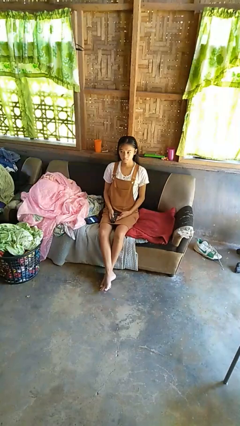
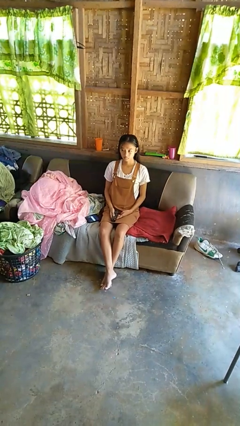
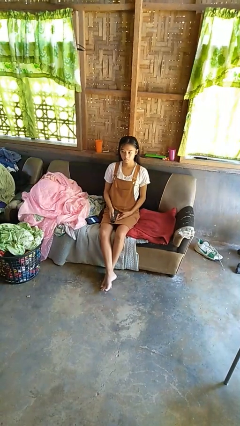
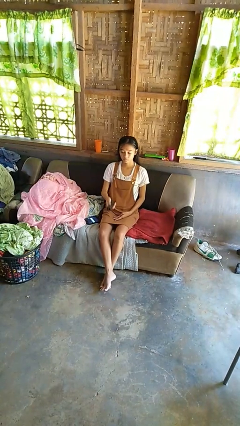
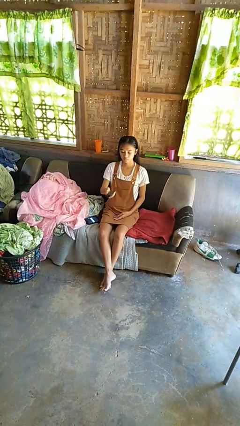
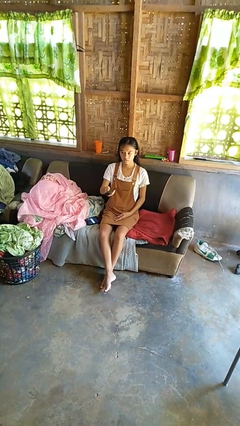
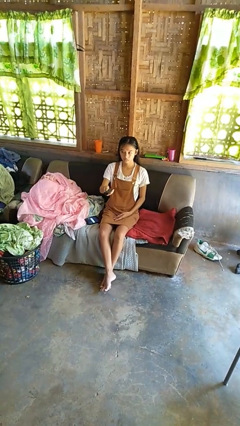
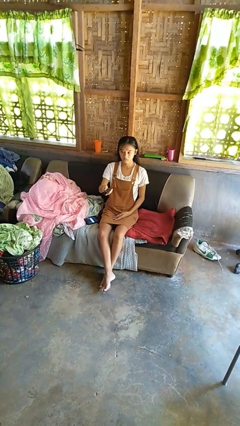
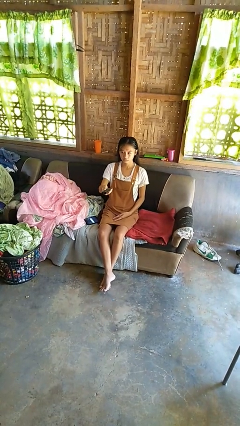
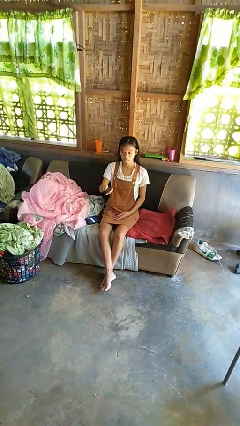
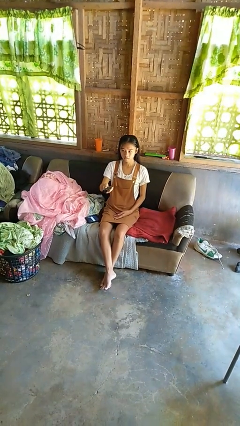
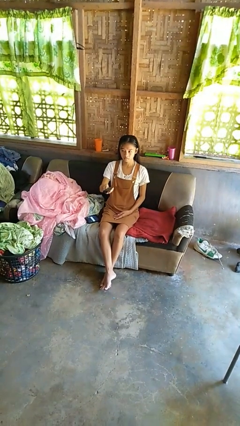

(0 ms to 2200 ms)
person uses television remote

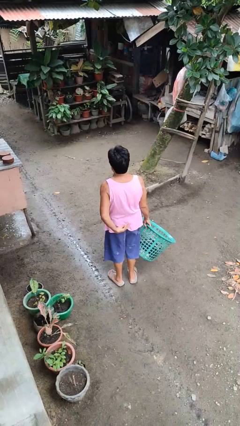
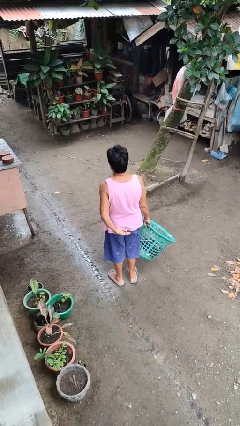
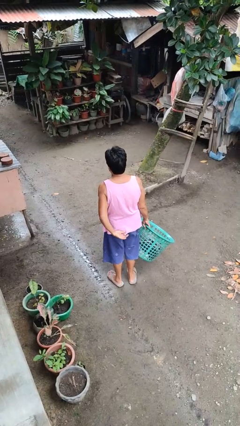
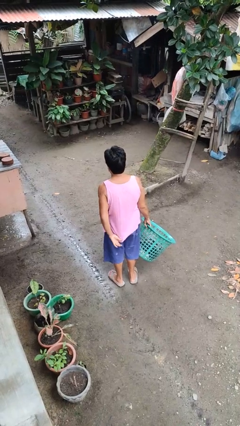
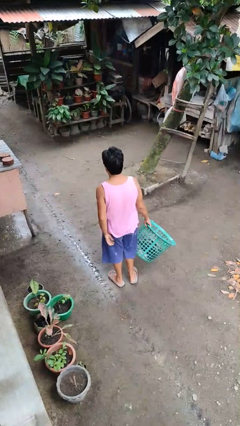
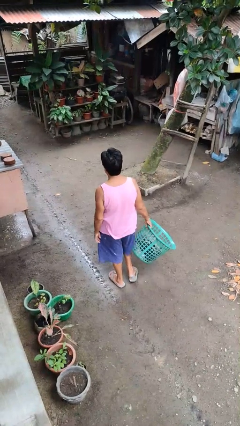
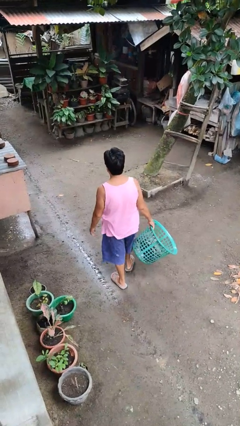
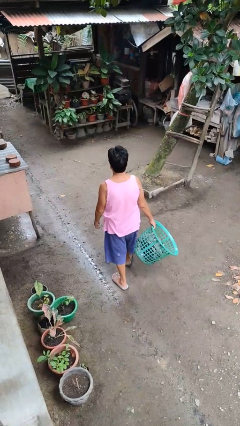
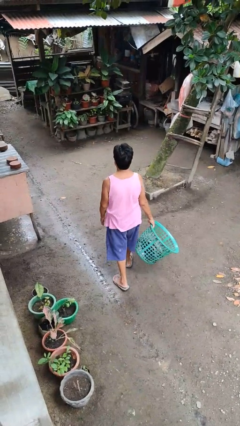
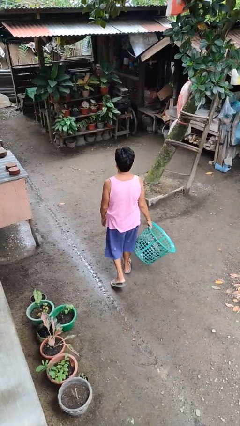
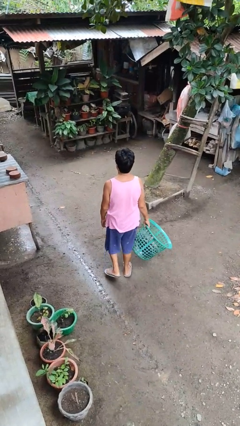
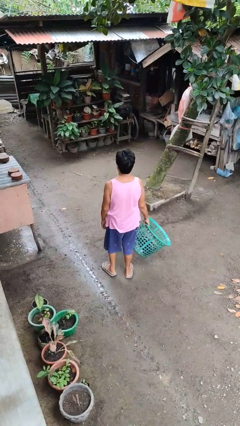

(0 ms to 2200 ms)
person carries laundry basket

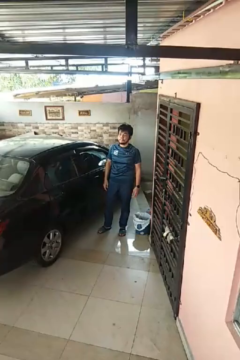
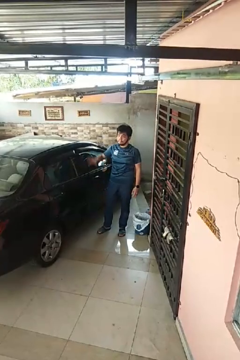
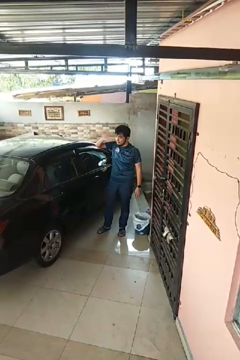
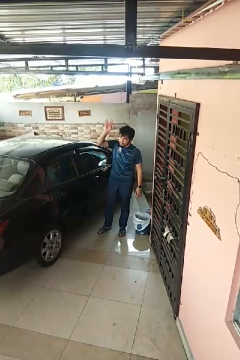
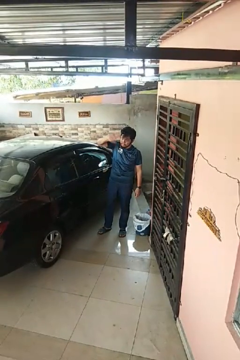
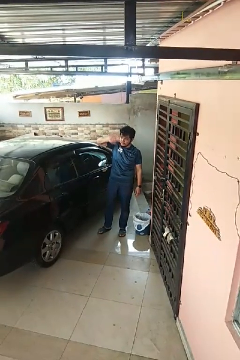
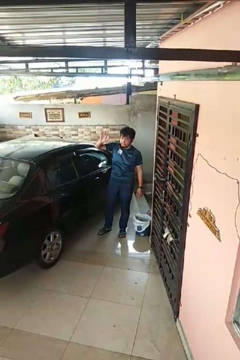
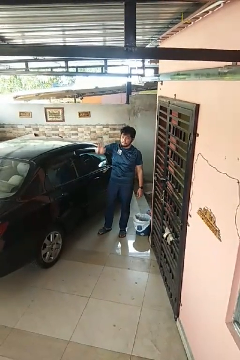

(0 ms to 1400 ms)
person waves at person

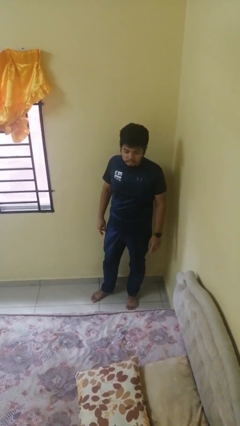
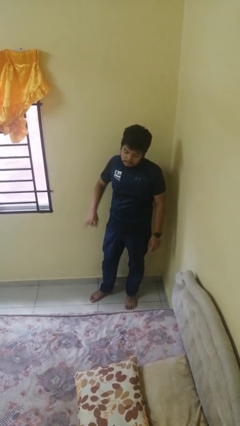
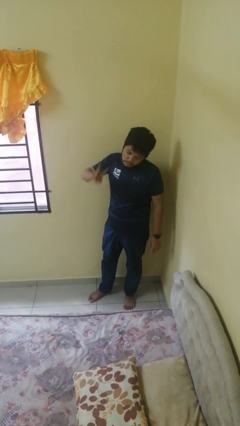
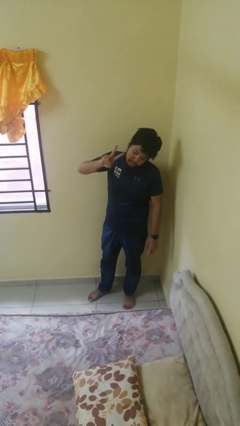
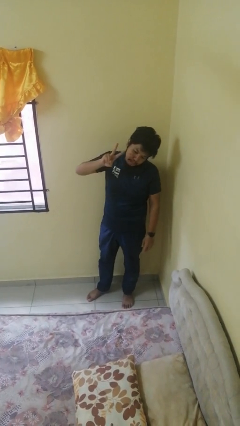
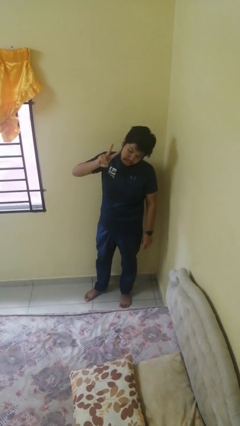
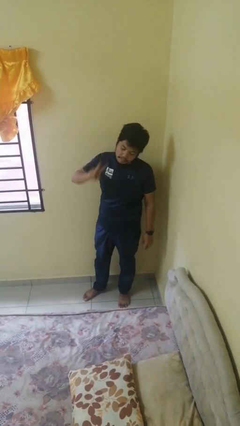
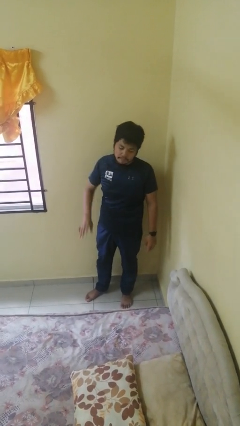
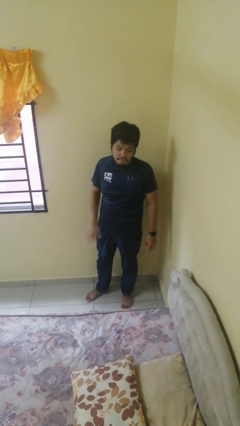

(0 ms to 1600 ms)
person gestures peace

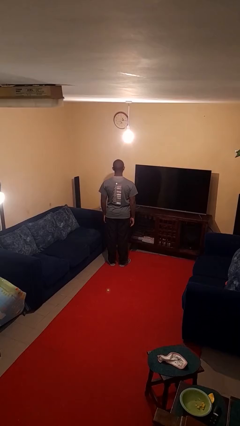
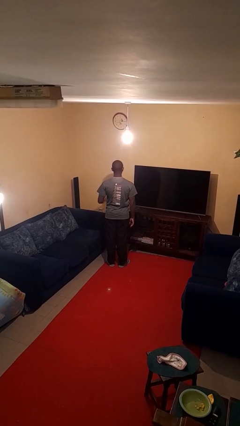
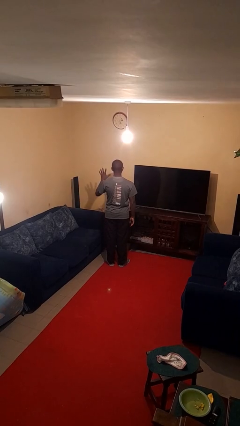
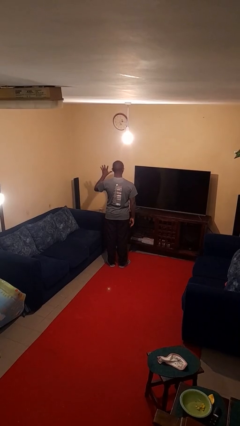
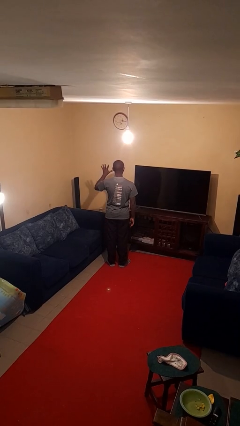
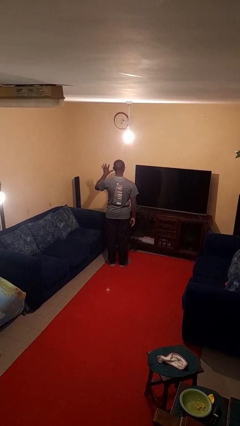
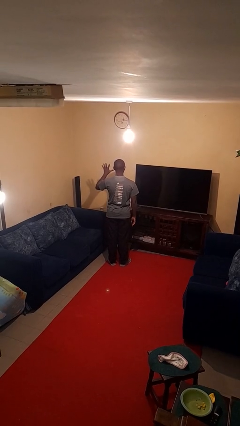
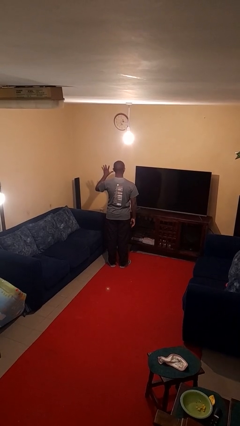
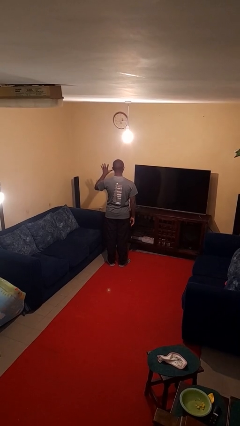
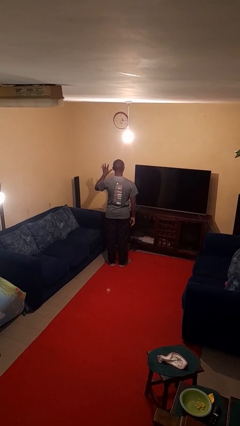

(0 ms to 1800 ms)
person gestures number five

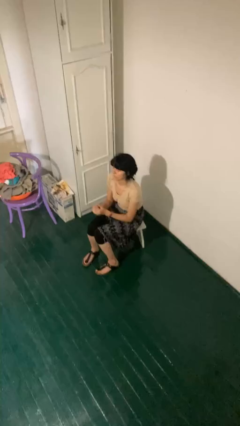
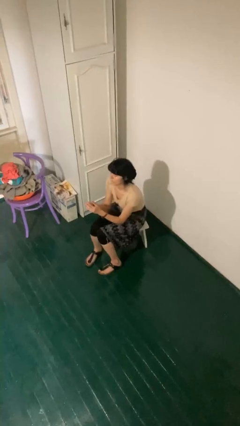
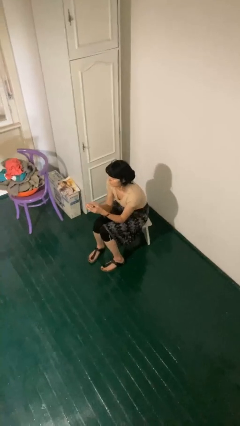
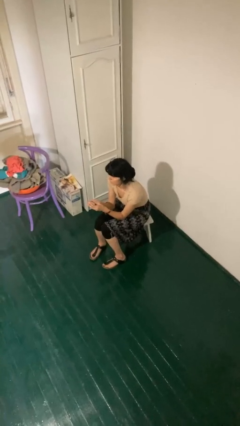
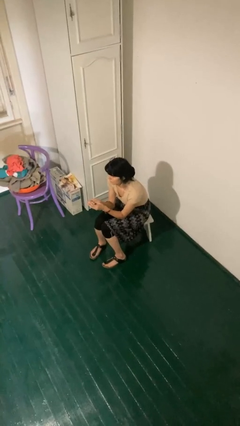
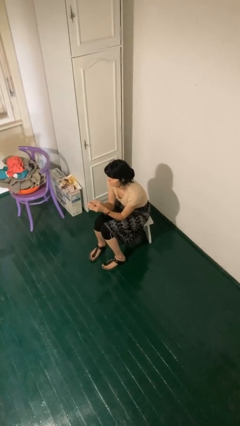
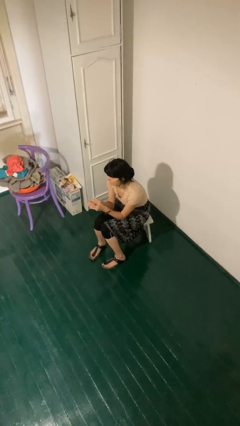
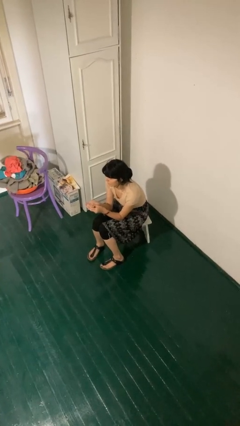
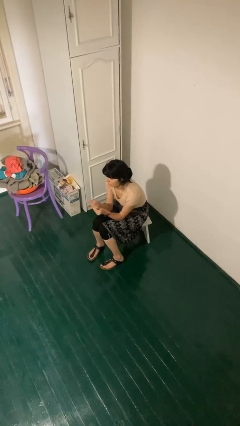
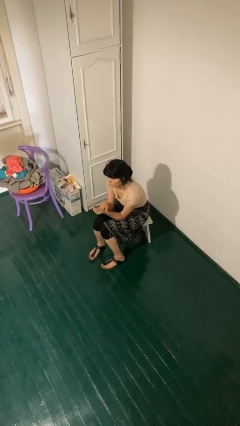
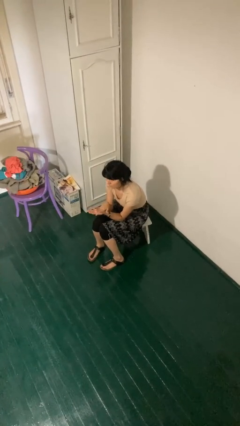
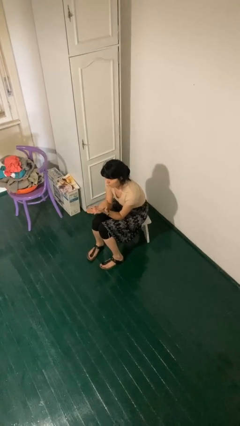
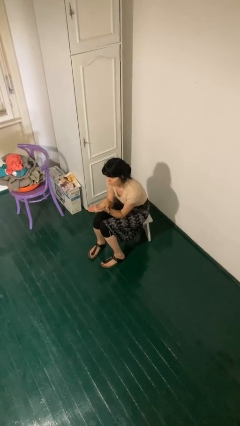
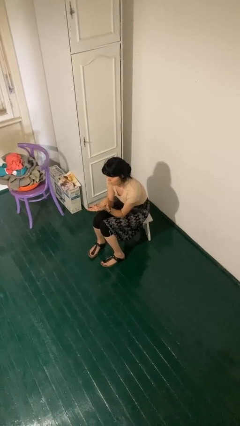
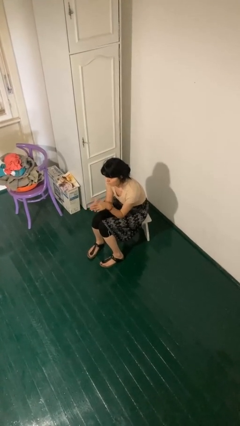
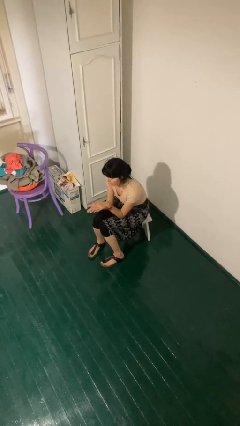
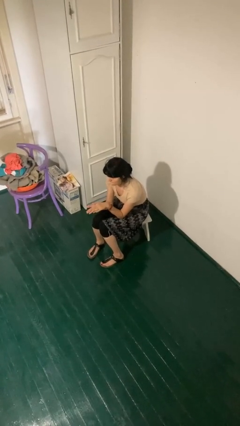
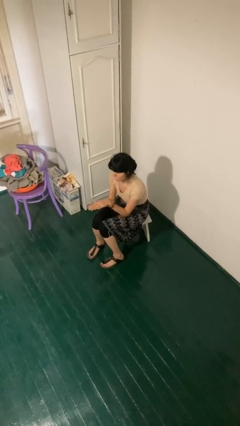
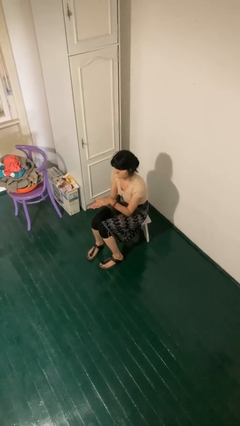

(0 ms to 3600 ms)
person looks at hands in lap

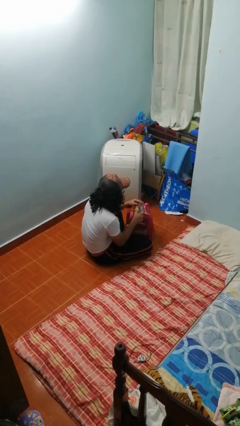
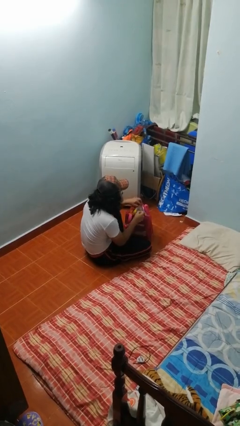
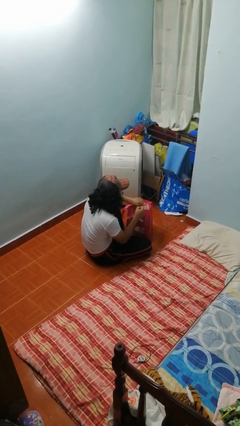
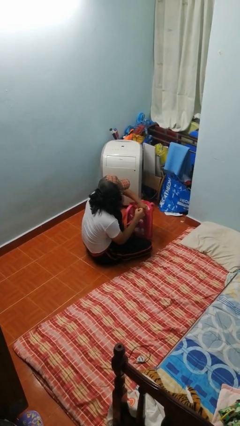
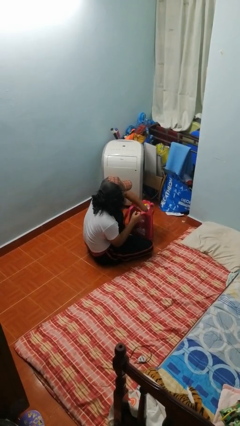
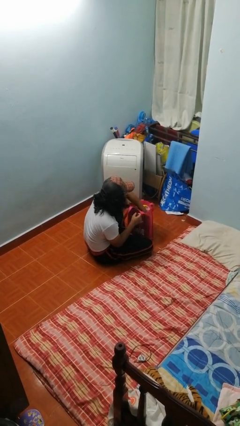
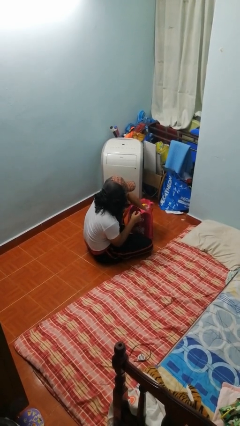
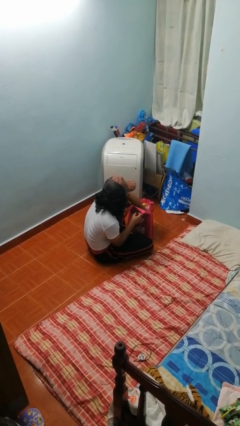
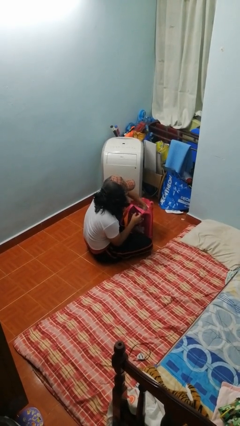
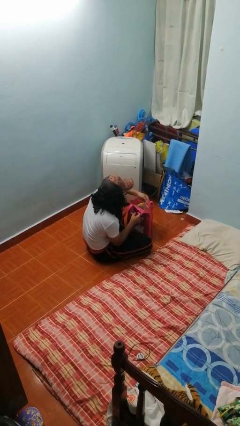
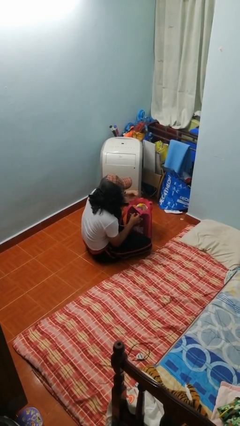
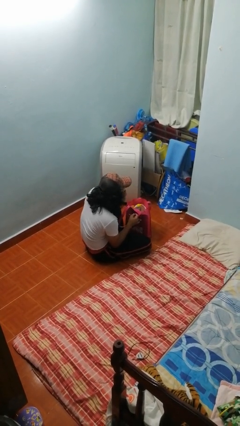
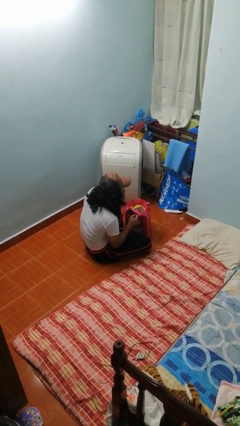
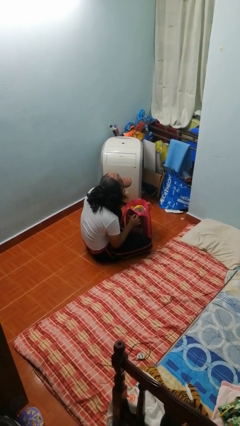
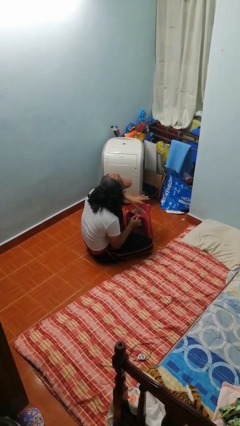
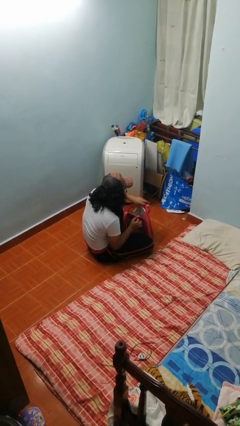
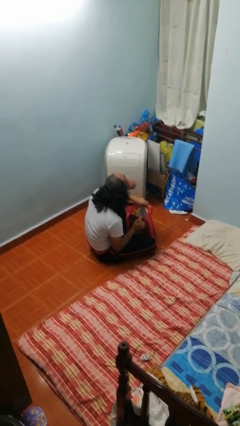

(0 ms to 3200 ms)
person eats snack from bag

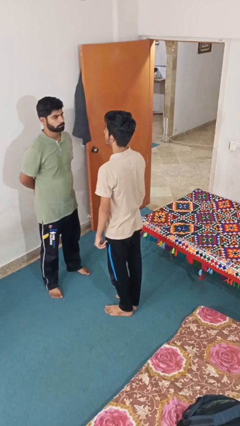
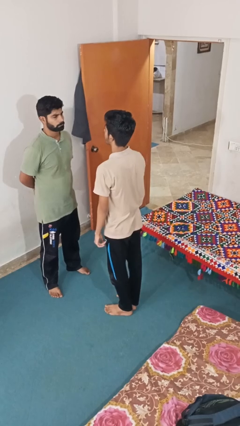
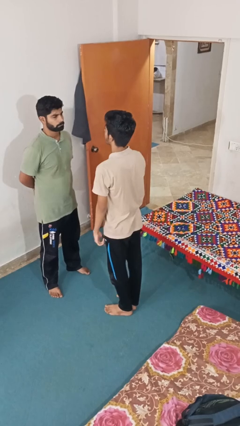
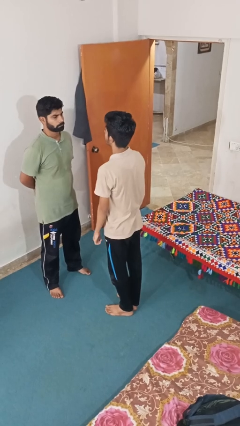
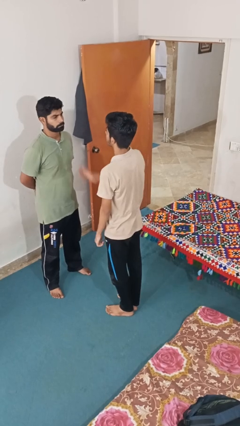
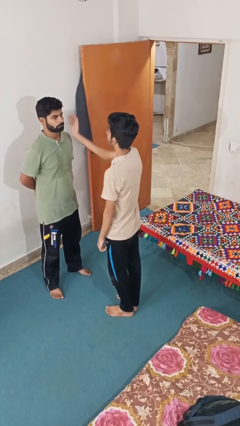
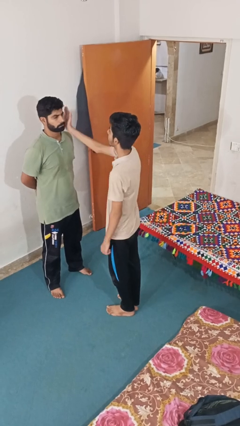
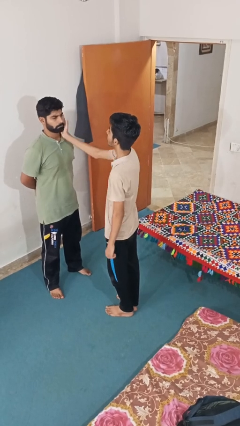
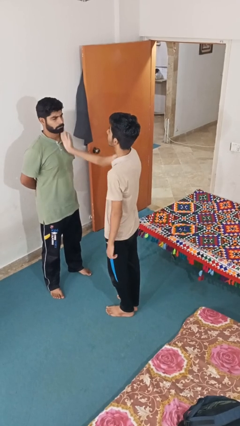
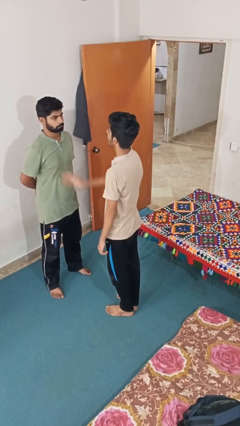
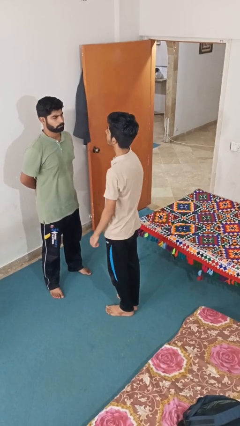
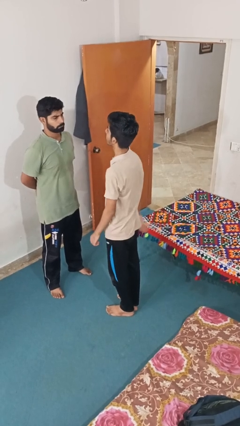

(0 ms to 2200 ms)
person touches face of person
